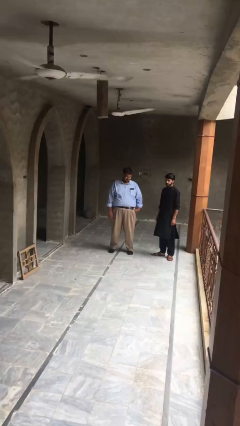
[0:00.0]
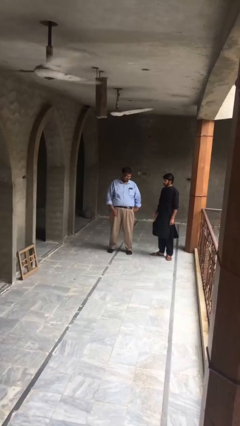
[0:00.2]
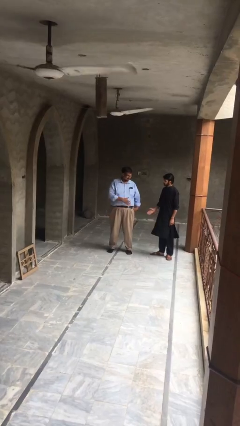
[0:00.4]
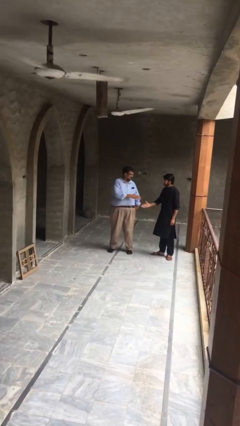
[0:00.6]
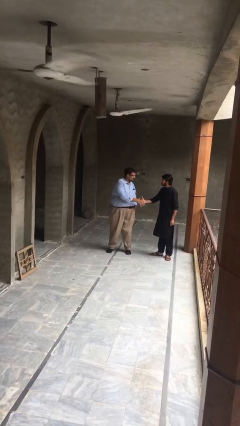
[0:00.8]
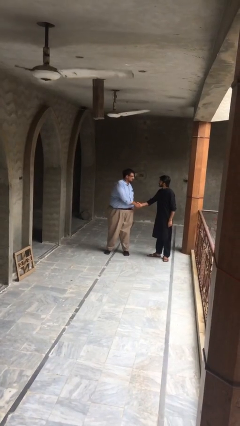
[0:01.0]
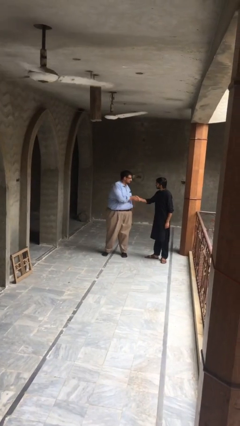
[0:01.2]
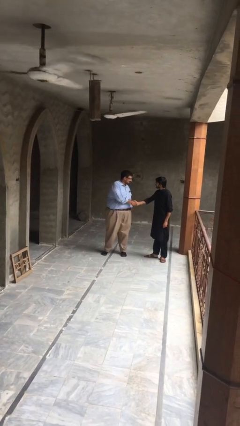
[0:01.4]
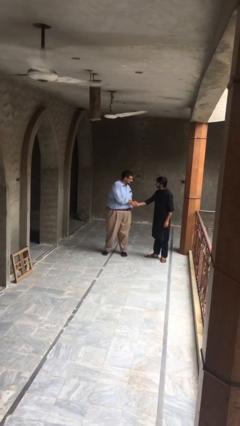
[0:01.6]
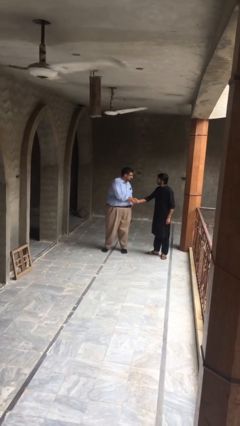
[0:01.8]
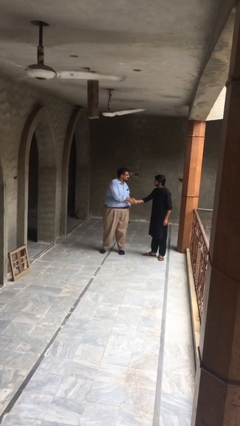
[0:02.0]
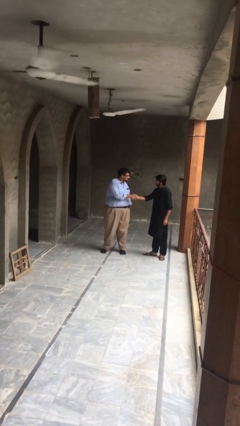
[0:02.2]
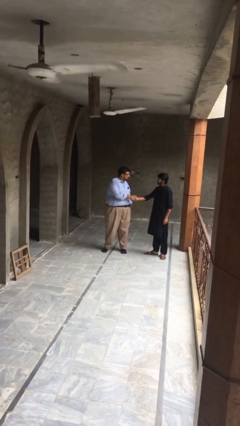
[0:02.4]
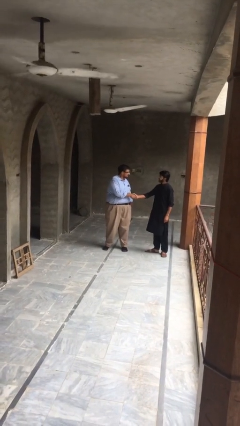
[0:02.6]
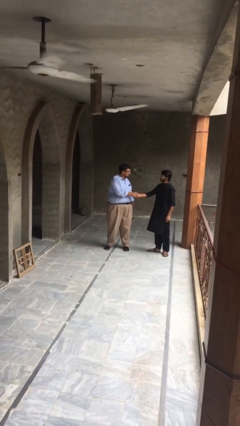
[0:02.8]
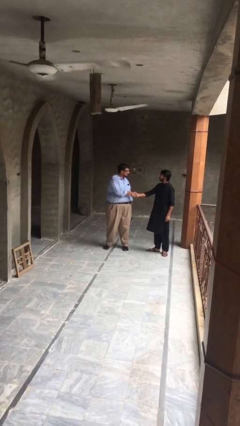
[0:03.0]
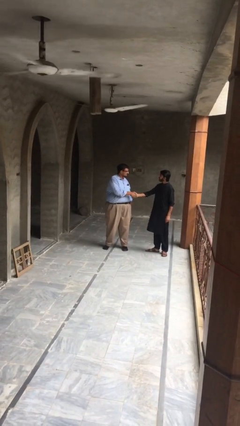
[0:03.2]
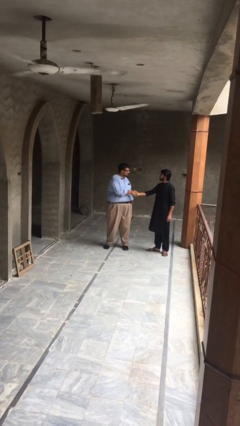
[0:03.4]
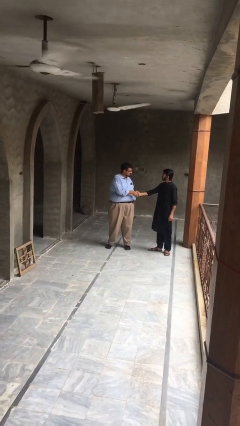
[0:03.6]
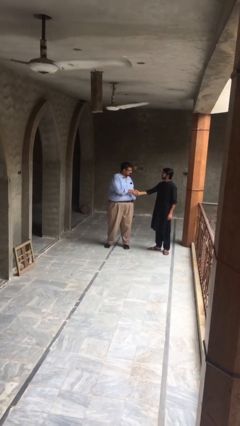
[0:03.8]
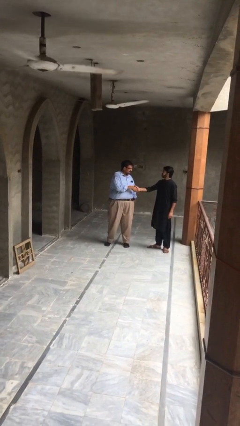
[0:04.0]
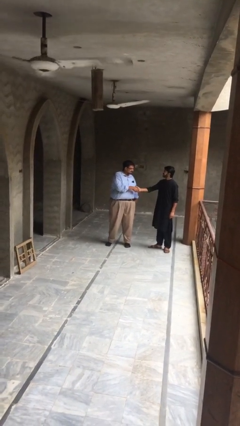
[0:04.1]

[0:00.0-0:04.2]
person shakes hand

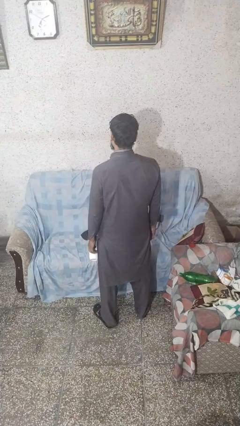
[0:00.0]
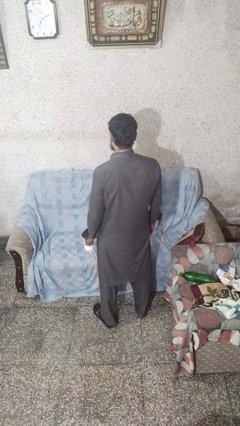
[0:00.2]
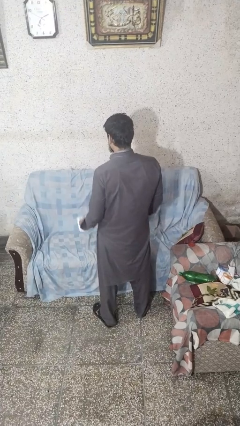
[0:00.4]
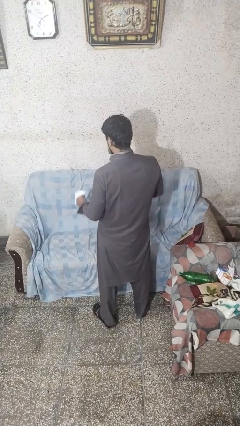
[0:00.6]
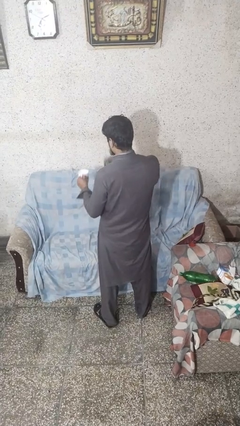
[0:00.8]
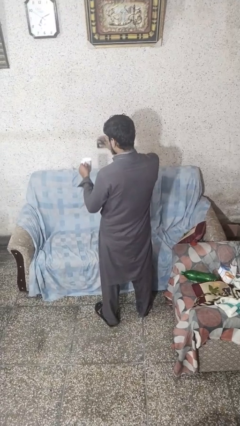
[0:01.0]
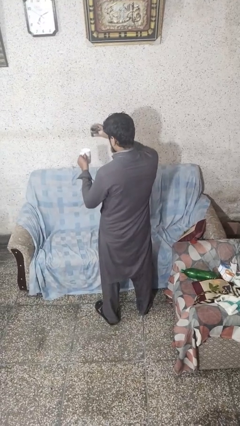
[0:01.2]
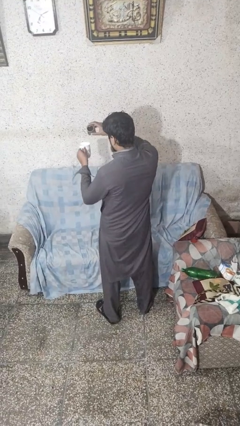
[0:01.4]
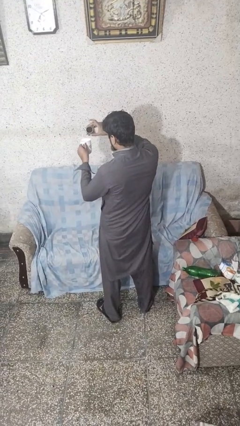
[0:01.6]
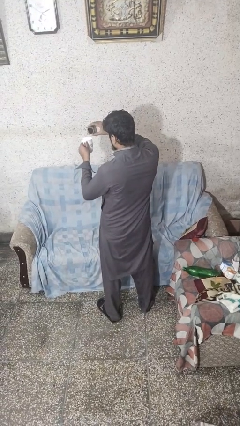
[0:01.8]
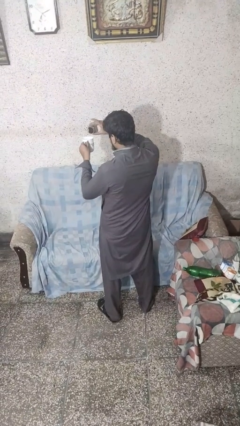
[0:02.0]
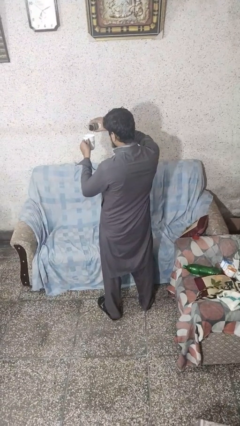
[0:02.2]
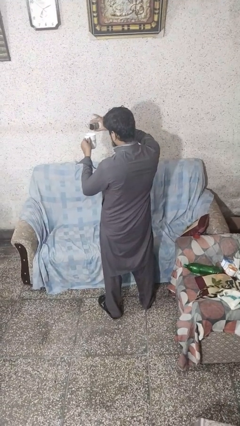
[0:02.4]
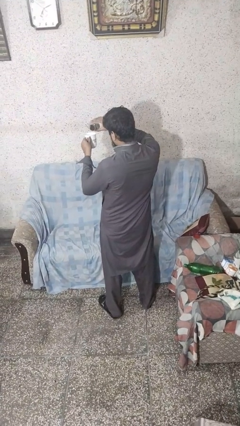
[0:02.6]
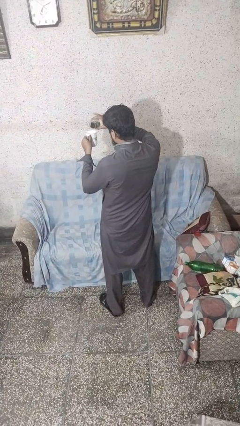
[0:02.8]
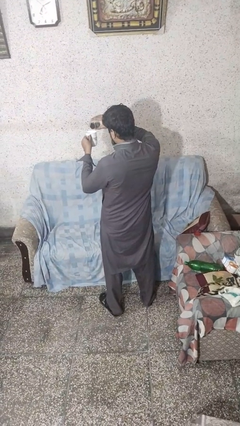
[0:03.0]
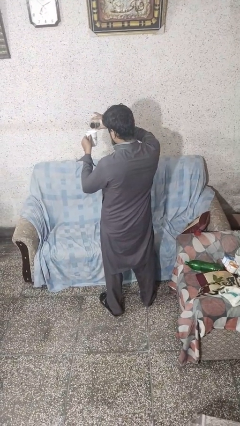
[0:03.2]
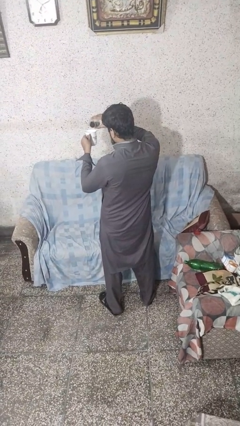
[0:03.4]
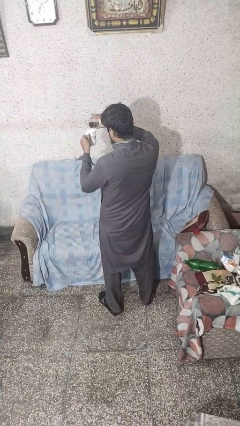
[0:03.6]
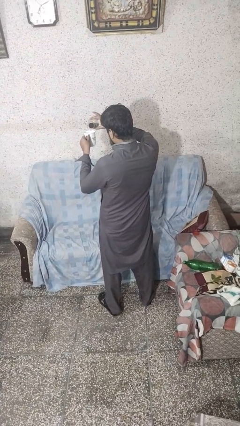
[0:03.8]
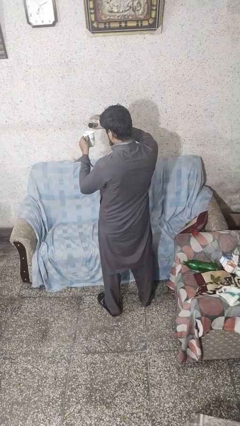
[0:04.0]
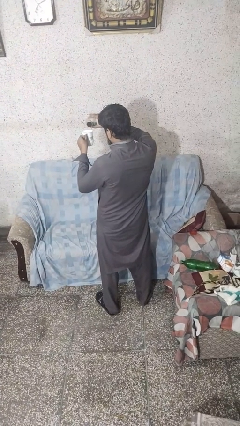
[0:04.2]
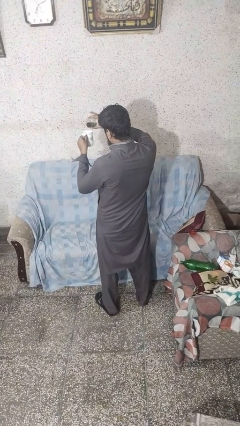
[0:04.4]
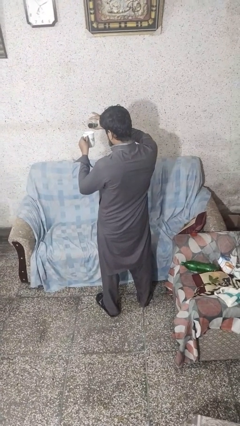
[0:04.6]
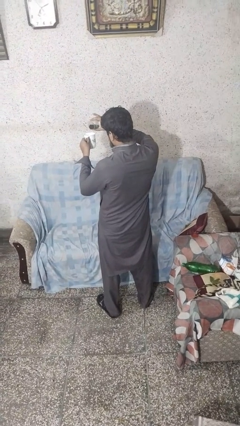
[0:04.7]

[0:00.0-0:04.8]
person pours coffee into mug

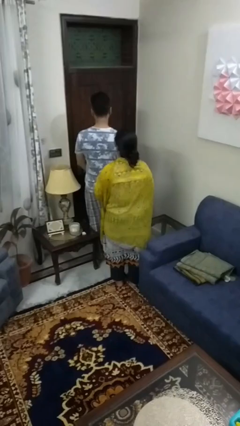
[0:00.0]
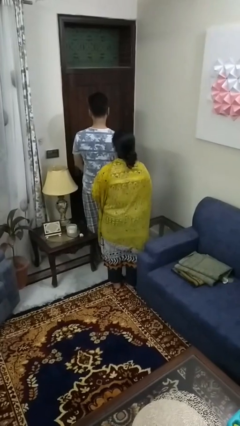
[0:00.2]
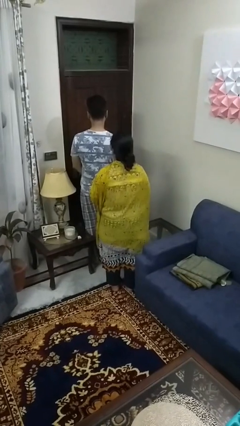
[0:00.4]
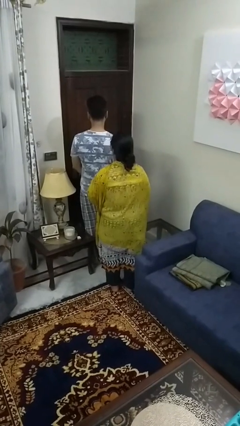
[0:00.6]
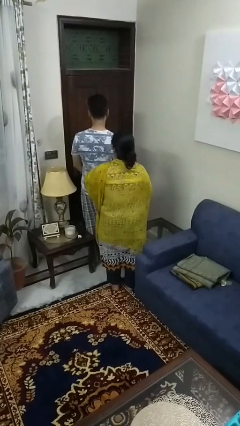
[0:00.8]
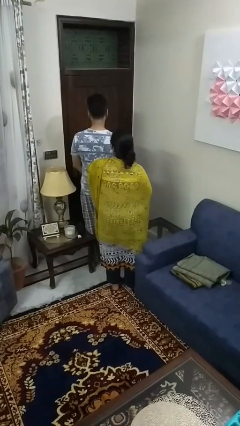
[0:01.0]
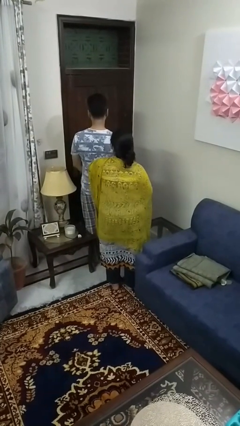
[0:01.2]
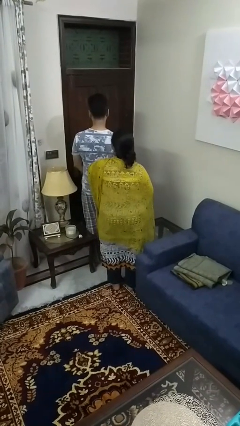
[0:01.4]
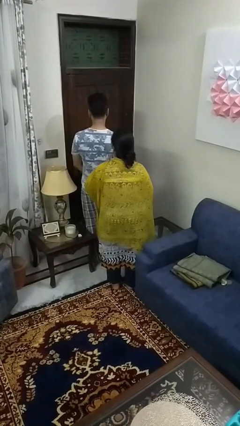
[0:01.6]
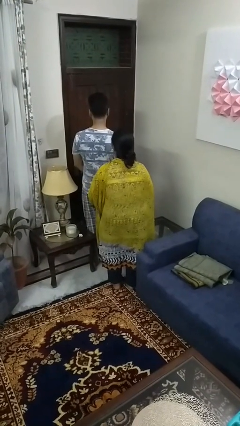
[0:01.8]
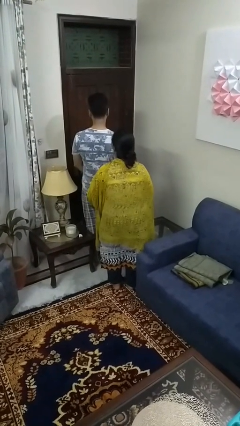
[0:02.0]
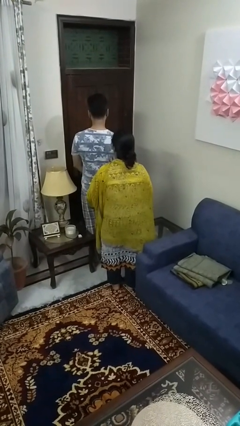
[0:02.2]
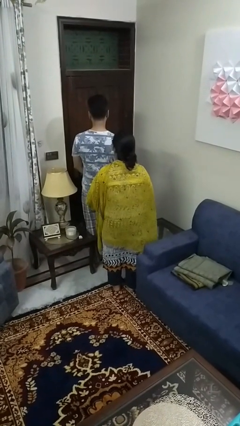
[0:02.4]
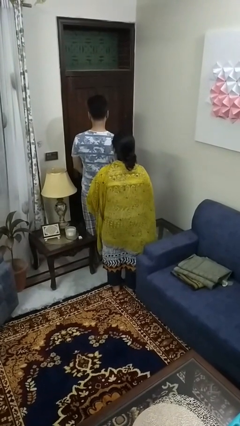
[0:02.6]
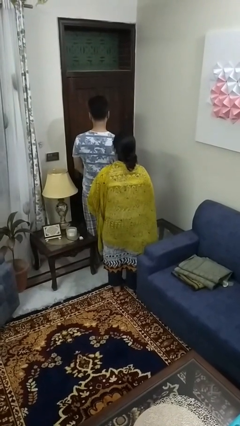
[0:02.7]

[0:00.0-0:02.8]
person nudges person with elbow

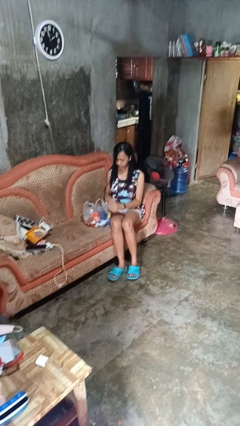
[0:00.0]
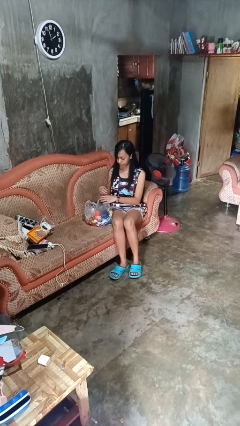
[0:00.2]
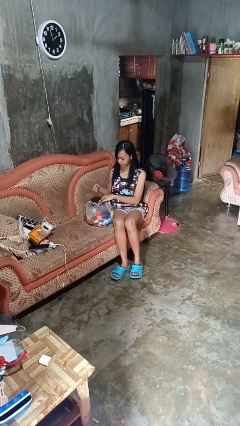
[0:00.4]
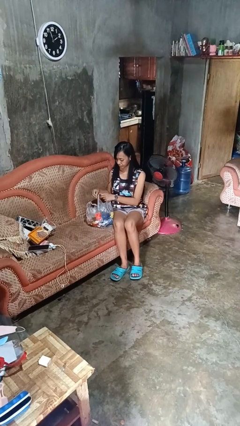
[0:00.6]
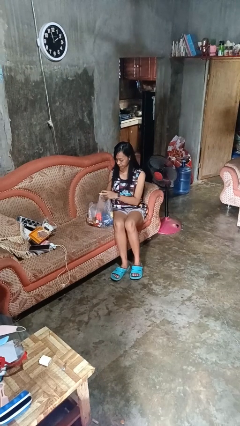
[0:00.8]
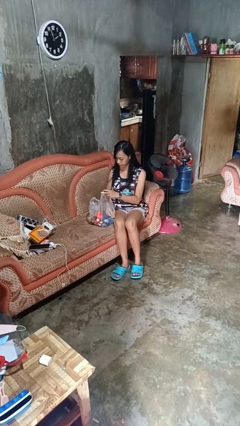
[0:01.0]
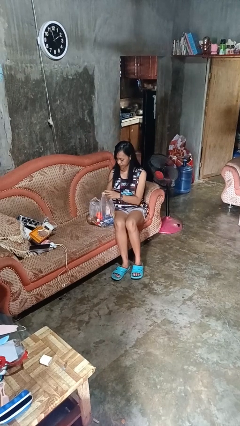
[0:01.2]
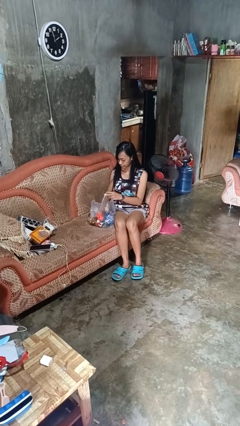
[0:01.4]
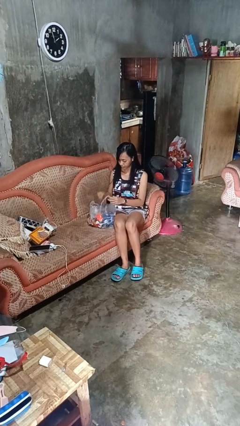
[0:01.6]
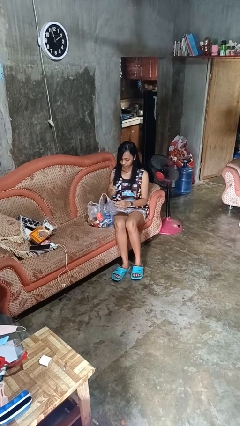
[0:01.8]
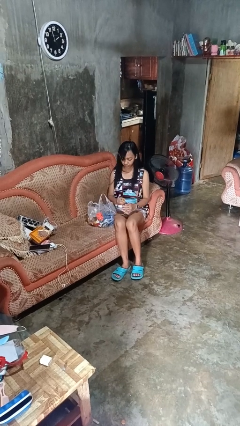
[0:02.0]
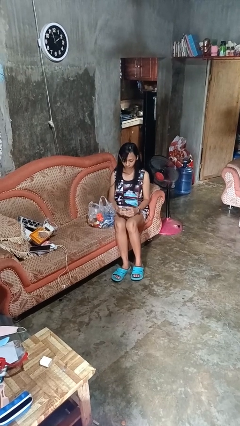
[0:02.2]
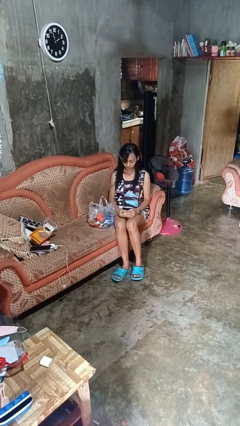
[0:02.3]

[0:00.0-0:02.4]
person takes object from bag

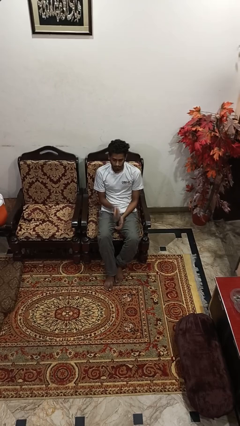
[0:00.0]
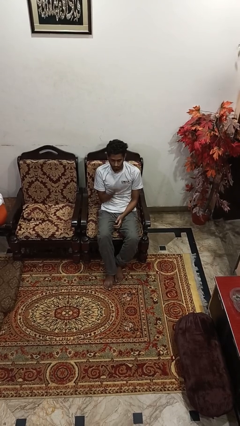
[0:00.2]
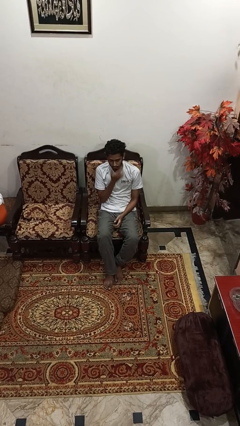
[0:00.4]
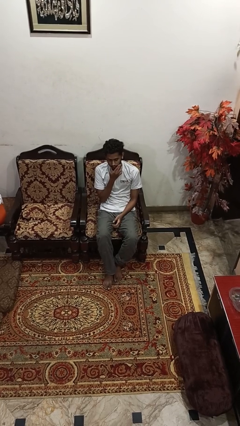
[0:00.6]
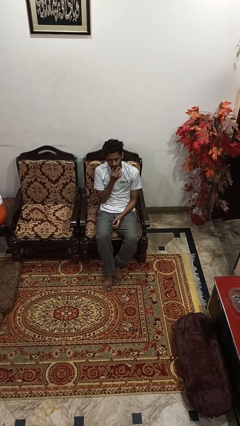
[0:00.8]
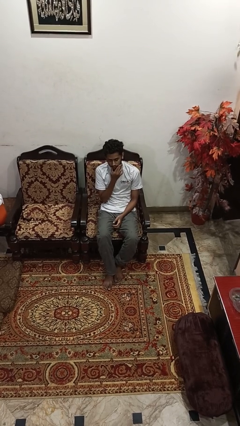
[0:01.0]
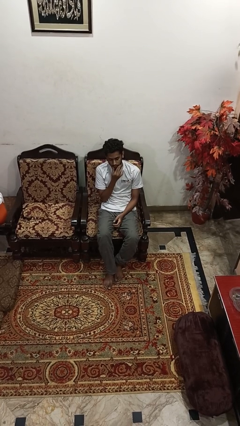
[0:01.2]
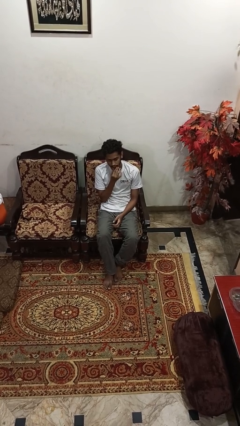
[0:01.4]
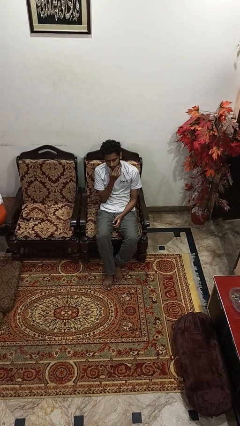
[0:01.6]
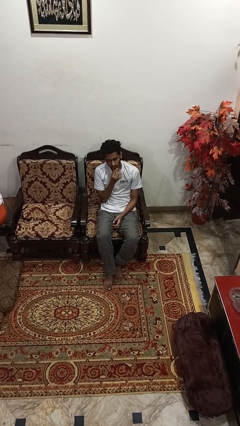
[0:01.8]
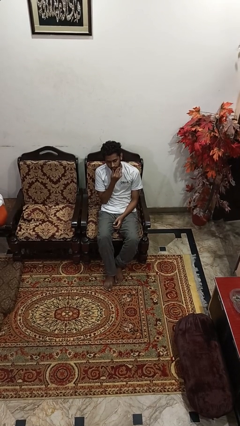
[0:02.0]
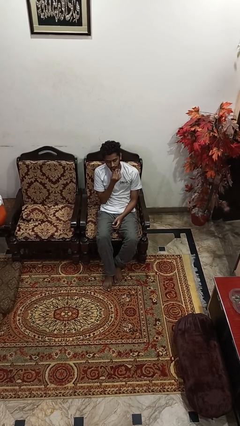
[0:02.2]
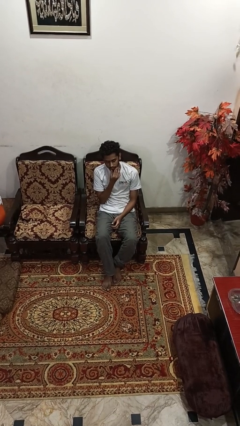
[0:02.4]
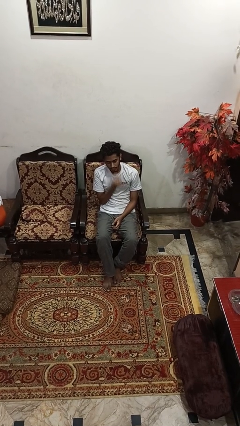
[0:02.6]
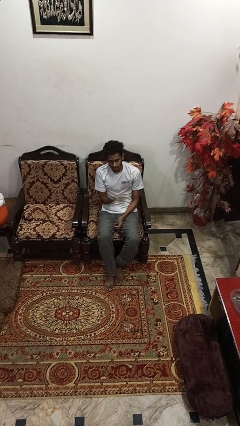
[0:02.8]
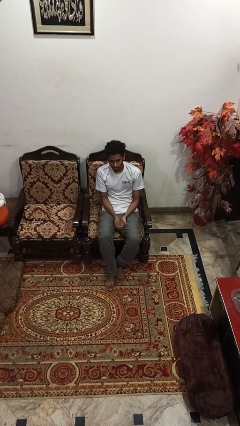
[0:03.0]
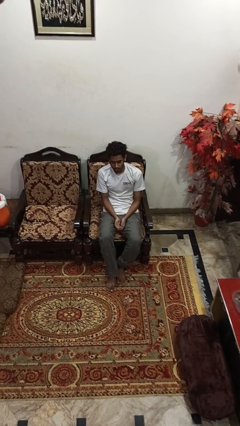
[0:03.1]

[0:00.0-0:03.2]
person strokes chin
